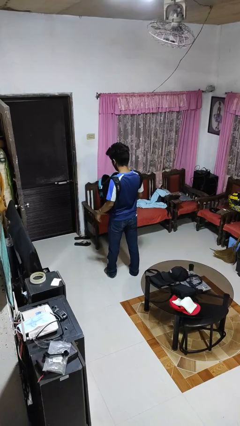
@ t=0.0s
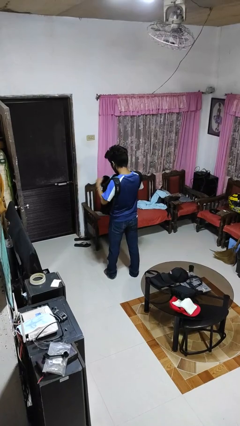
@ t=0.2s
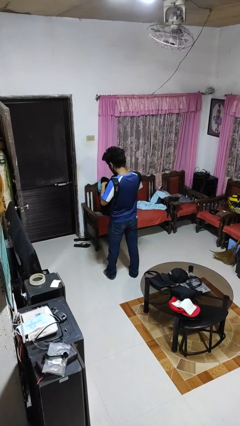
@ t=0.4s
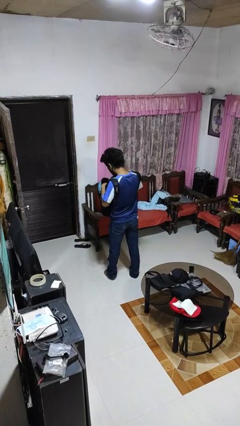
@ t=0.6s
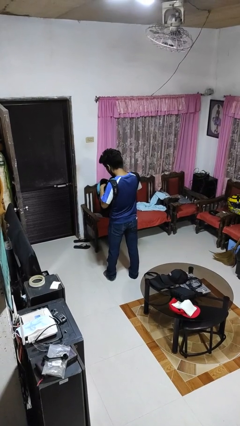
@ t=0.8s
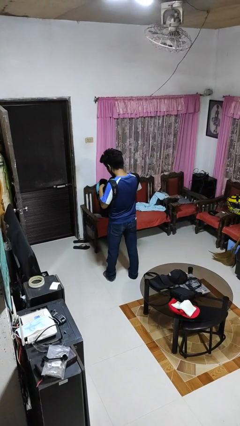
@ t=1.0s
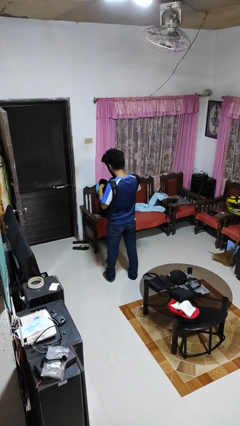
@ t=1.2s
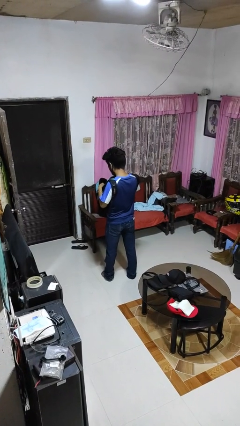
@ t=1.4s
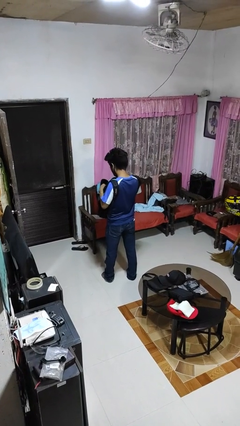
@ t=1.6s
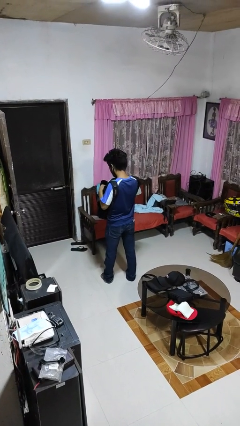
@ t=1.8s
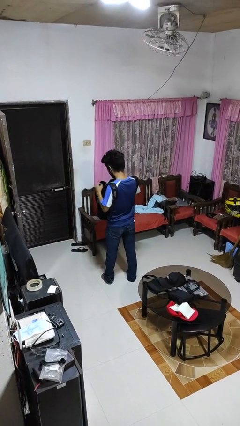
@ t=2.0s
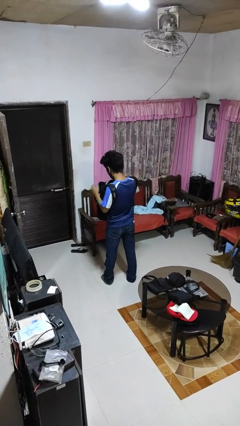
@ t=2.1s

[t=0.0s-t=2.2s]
person searches in backpack

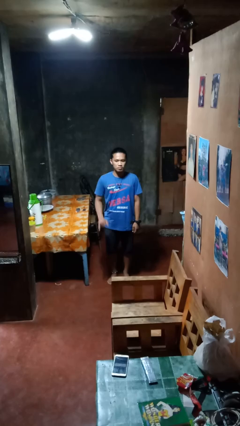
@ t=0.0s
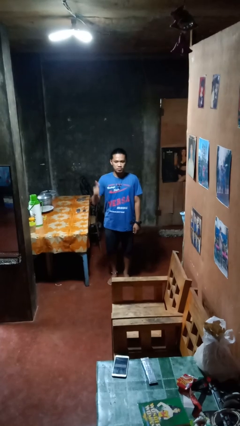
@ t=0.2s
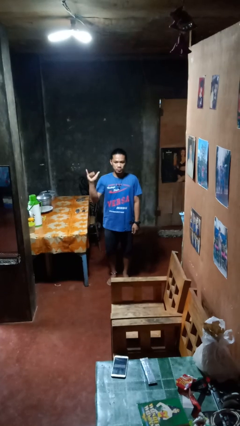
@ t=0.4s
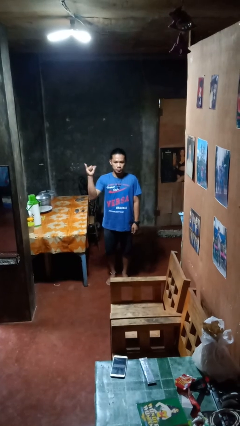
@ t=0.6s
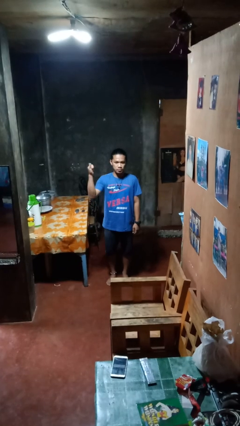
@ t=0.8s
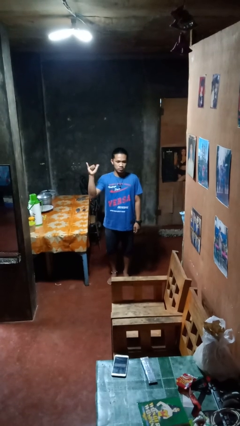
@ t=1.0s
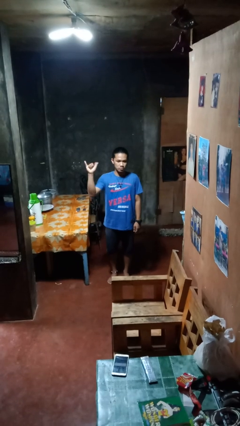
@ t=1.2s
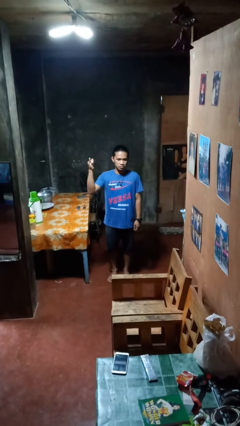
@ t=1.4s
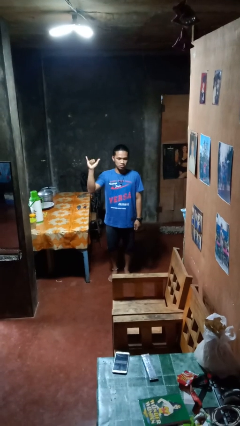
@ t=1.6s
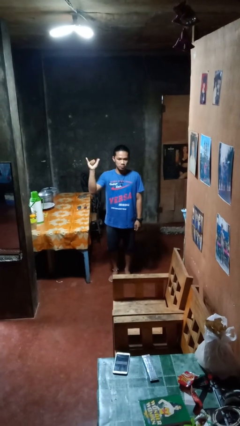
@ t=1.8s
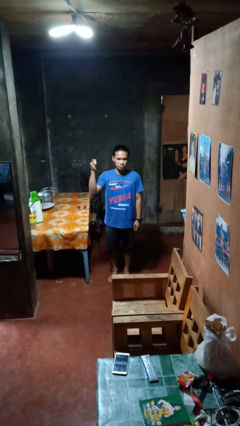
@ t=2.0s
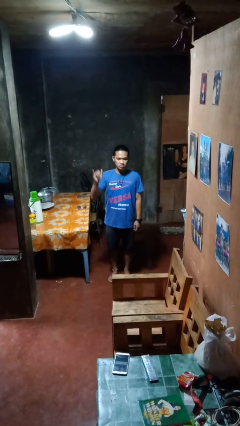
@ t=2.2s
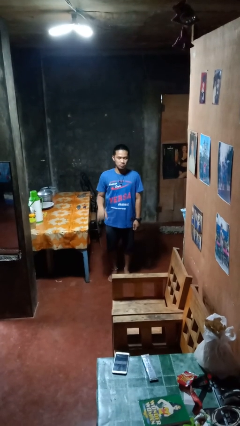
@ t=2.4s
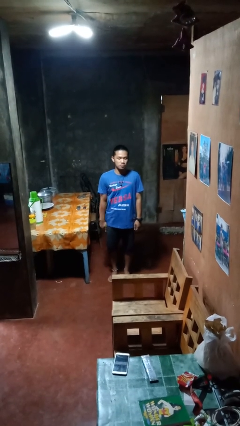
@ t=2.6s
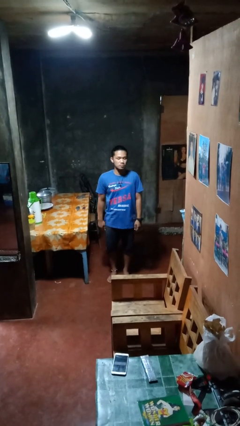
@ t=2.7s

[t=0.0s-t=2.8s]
person gestures hang loose

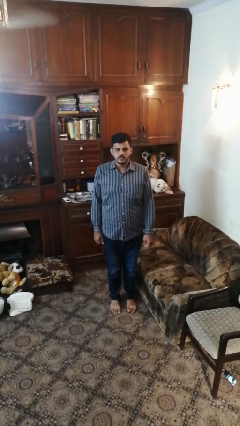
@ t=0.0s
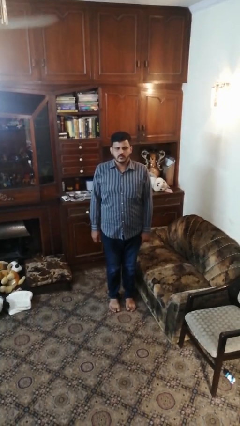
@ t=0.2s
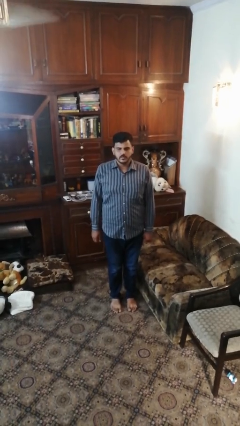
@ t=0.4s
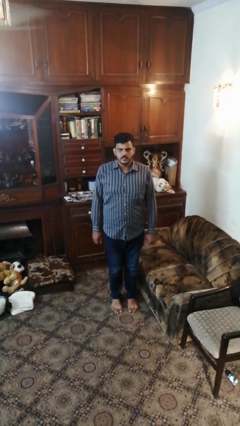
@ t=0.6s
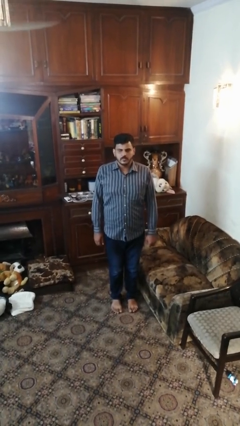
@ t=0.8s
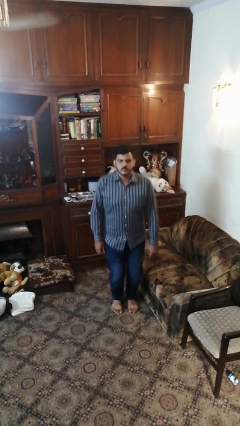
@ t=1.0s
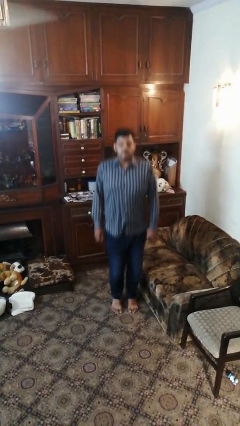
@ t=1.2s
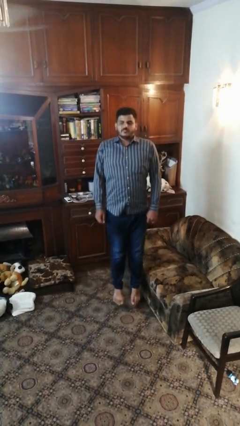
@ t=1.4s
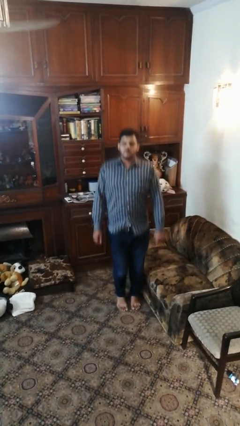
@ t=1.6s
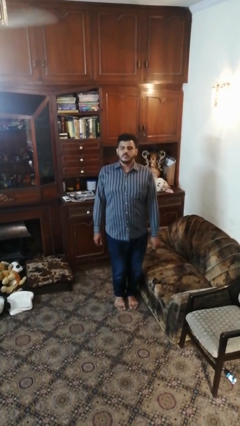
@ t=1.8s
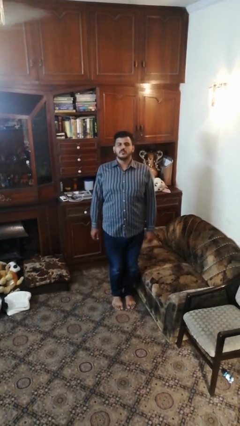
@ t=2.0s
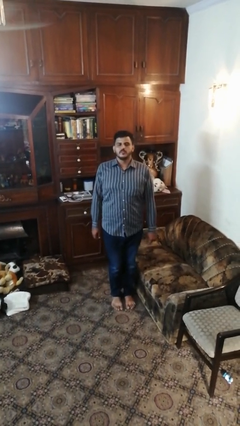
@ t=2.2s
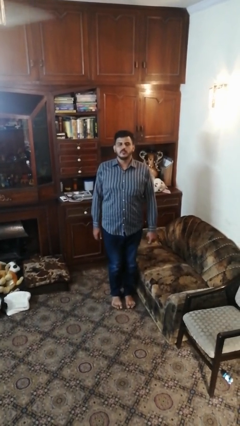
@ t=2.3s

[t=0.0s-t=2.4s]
person jumps

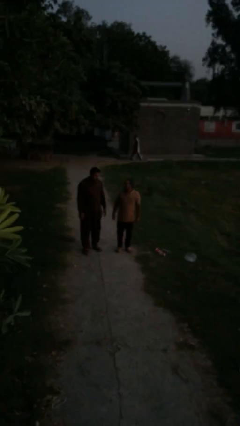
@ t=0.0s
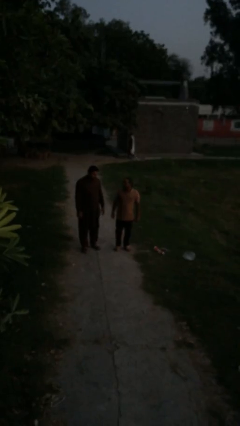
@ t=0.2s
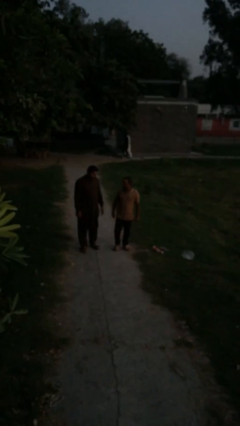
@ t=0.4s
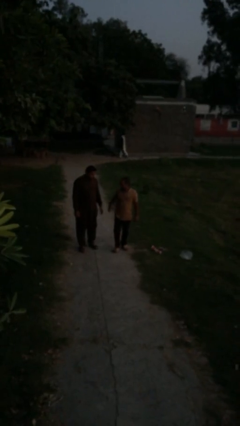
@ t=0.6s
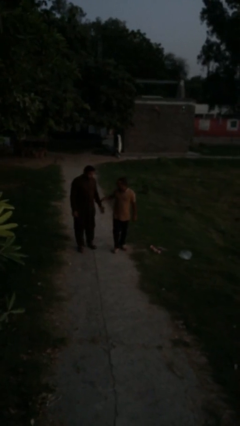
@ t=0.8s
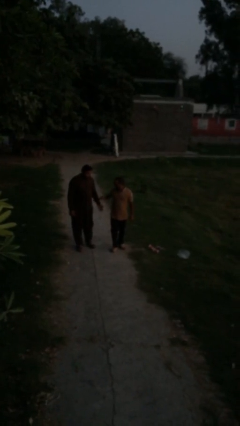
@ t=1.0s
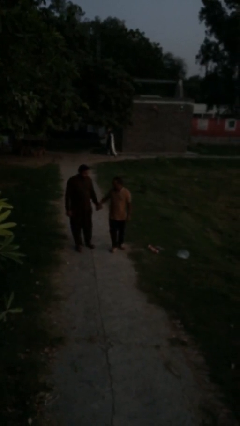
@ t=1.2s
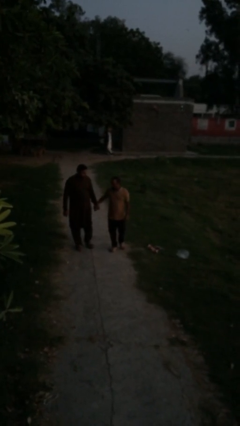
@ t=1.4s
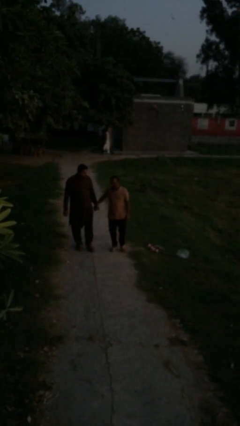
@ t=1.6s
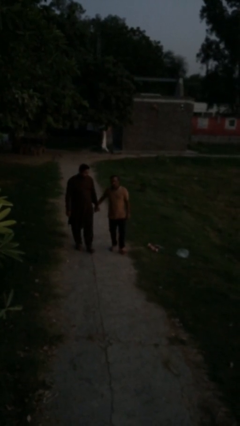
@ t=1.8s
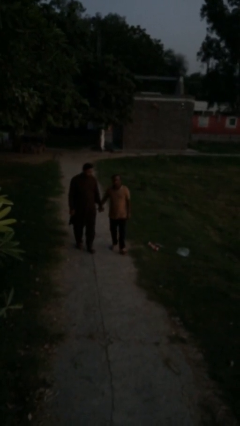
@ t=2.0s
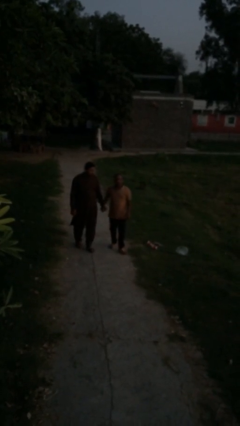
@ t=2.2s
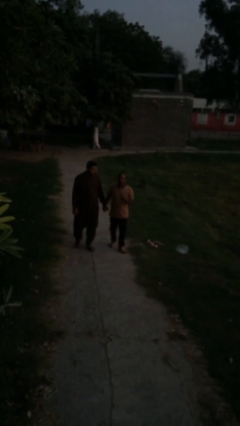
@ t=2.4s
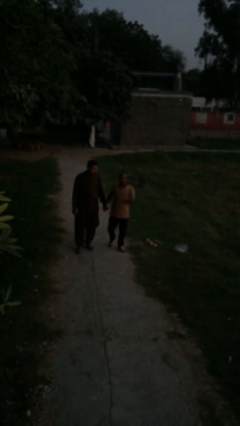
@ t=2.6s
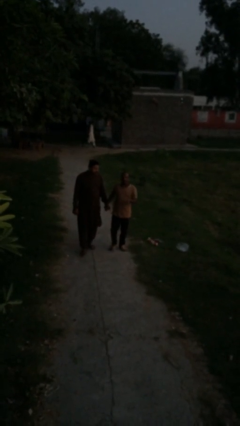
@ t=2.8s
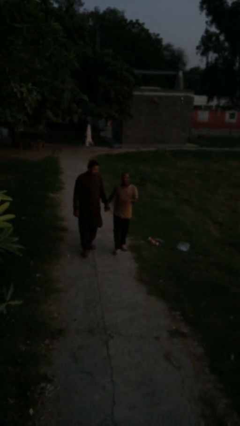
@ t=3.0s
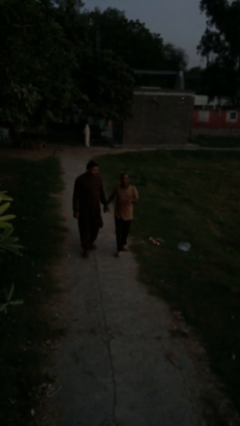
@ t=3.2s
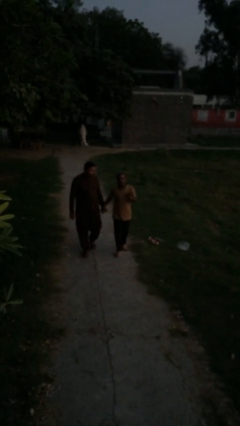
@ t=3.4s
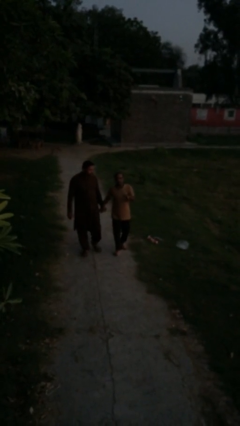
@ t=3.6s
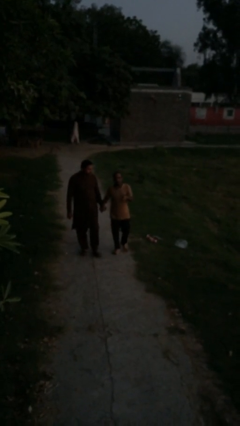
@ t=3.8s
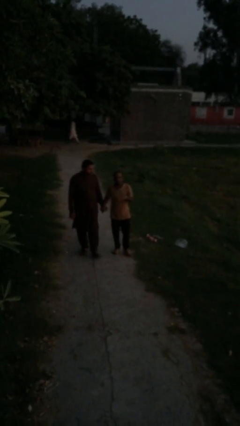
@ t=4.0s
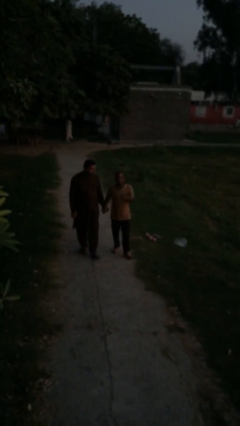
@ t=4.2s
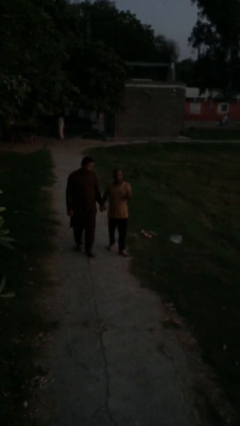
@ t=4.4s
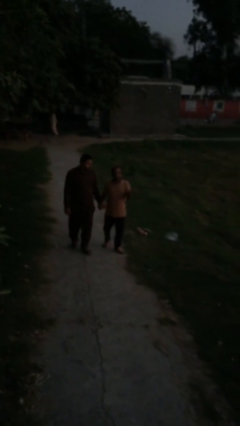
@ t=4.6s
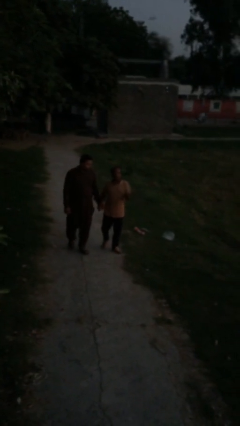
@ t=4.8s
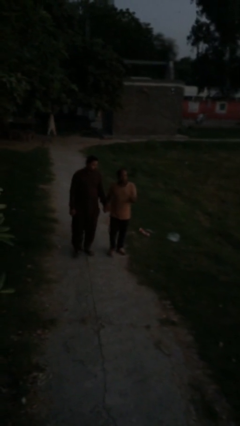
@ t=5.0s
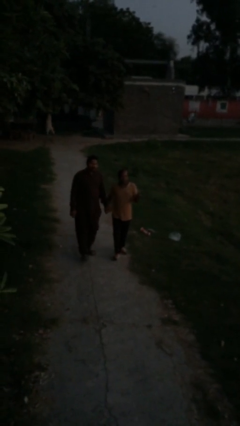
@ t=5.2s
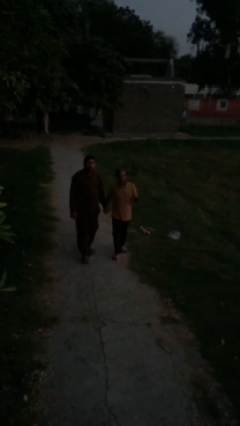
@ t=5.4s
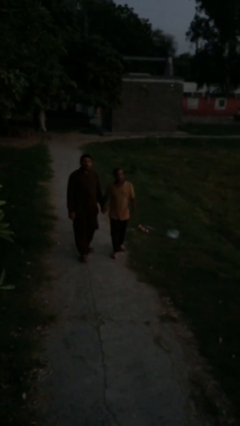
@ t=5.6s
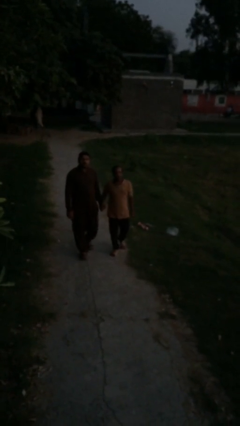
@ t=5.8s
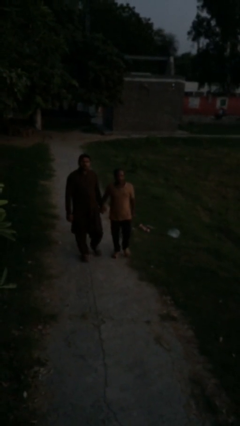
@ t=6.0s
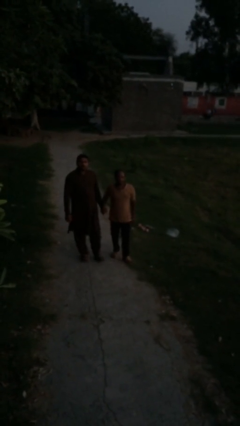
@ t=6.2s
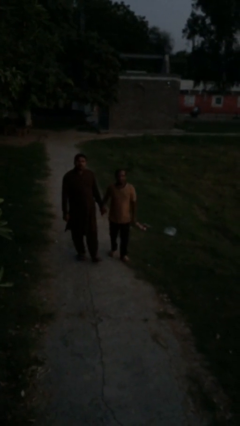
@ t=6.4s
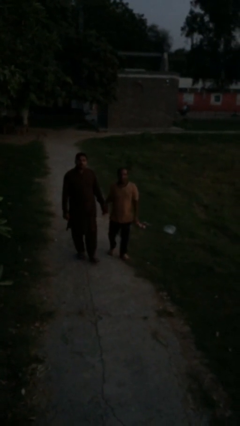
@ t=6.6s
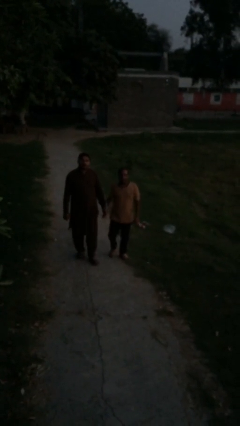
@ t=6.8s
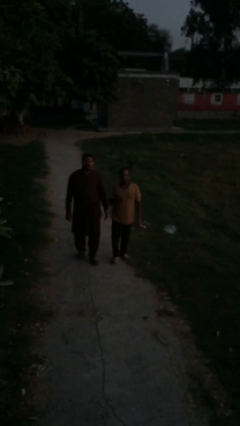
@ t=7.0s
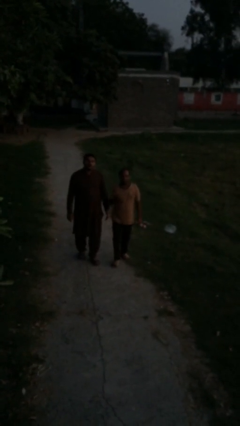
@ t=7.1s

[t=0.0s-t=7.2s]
person holds hand

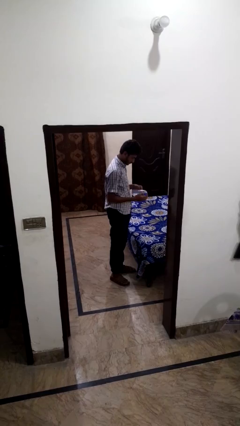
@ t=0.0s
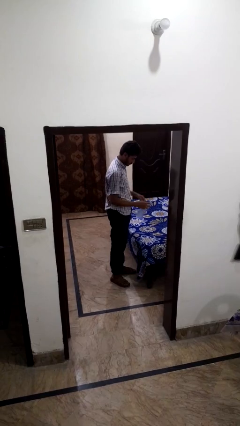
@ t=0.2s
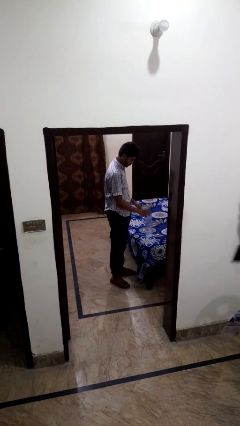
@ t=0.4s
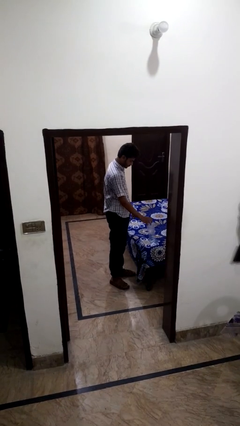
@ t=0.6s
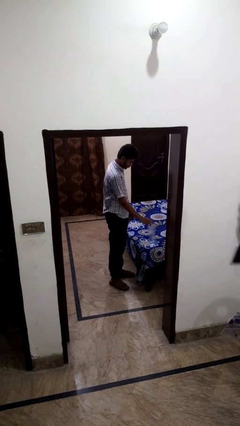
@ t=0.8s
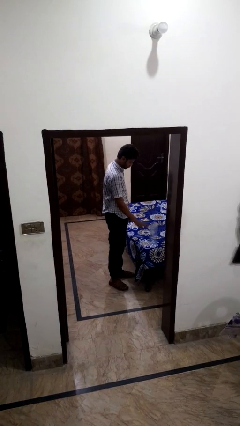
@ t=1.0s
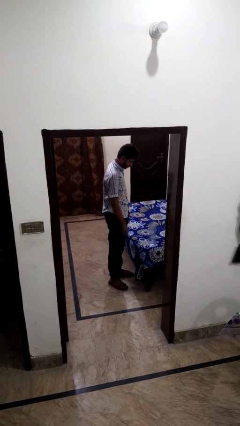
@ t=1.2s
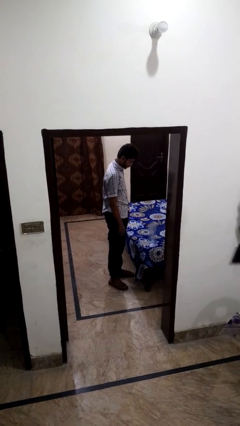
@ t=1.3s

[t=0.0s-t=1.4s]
person puts down object on bed

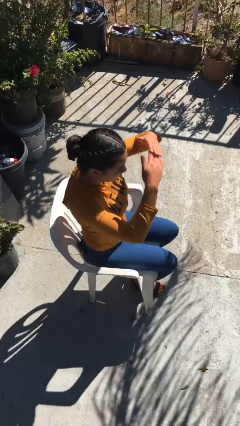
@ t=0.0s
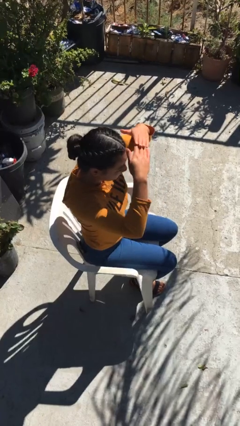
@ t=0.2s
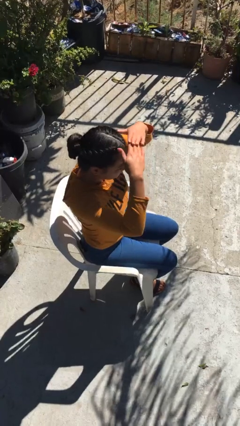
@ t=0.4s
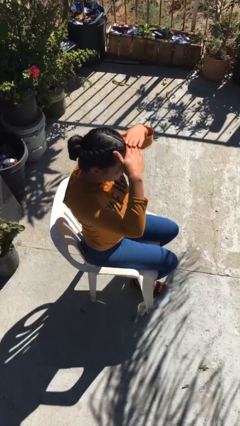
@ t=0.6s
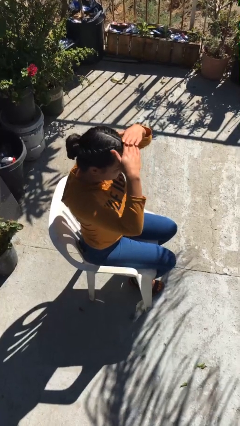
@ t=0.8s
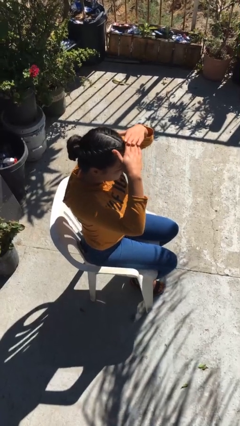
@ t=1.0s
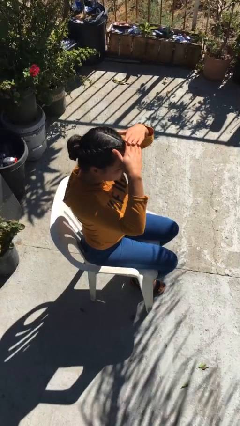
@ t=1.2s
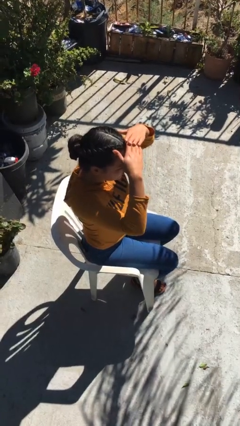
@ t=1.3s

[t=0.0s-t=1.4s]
person shades eyes
